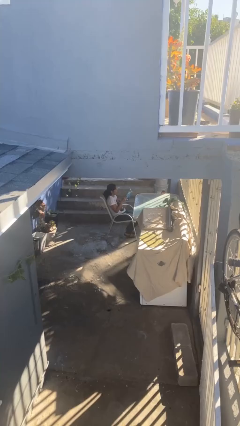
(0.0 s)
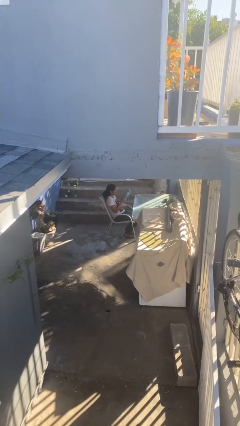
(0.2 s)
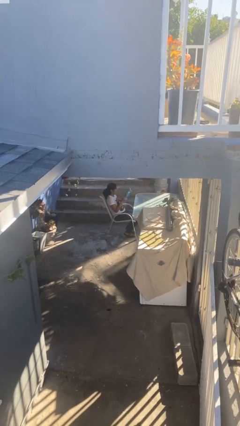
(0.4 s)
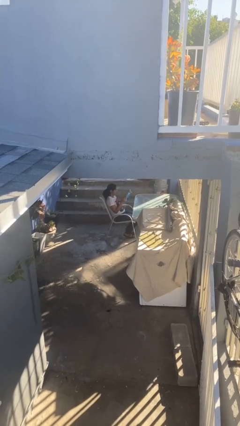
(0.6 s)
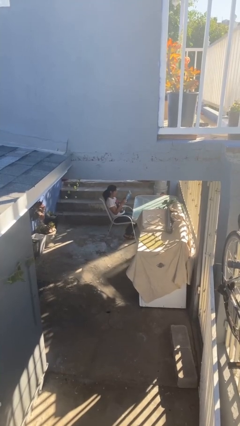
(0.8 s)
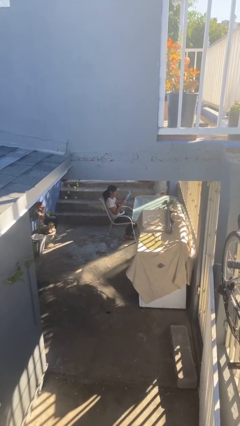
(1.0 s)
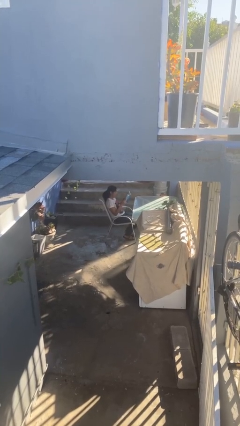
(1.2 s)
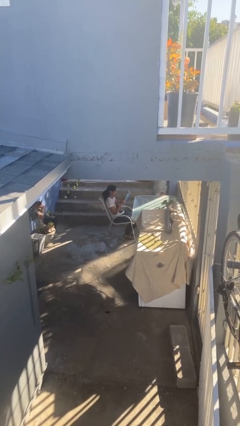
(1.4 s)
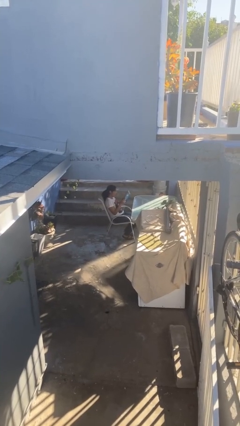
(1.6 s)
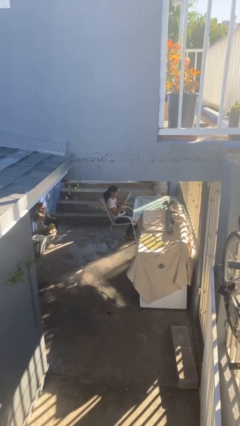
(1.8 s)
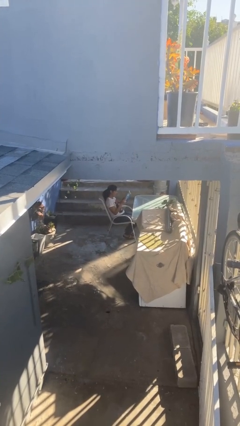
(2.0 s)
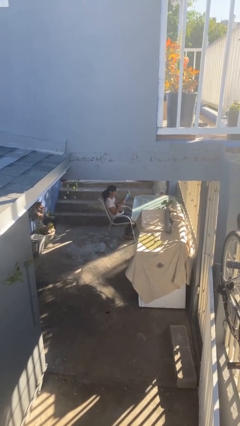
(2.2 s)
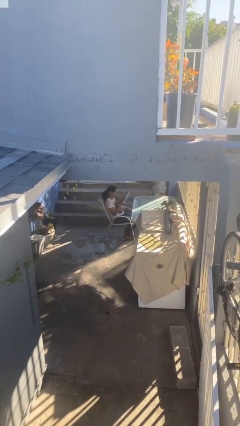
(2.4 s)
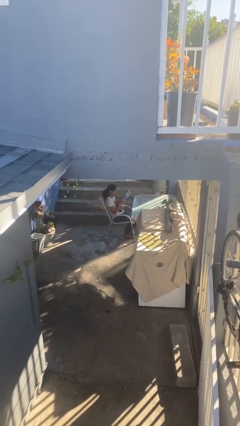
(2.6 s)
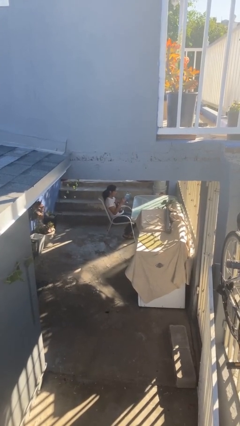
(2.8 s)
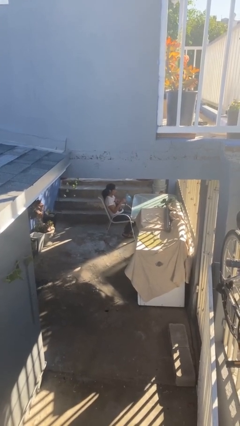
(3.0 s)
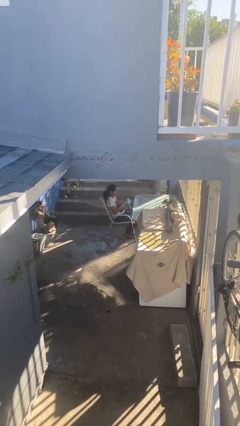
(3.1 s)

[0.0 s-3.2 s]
person reads document

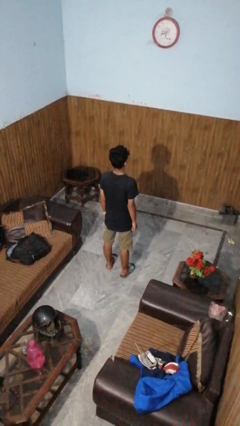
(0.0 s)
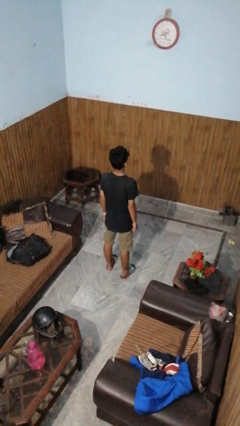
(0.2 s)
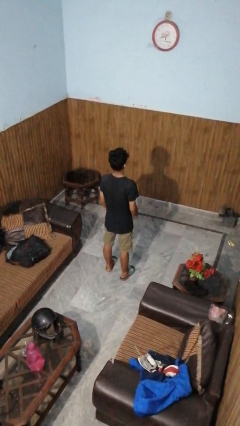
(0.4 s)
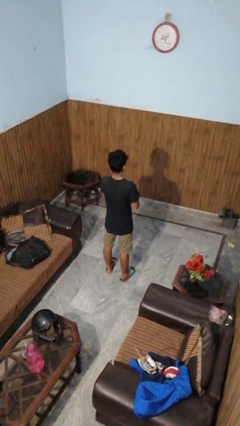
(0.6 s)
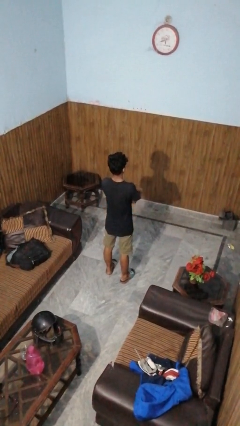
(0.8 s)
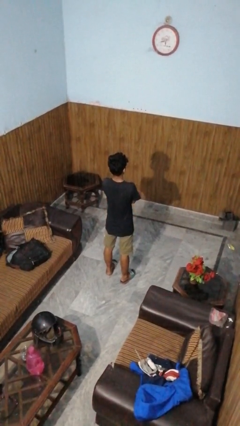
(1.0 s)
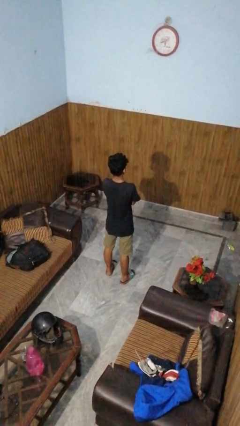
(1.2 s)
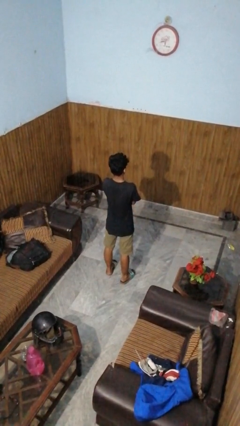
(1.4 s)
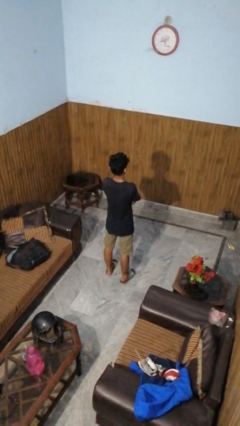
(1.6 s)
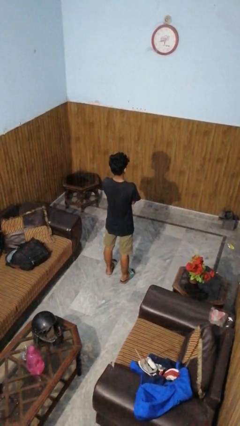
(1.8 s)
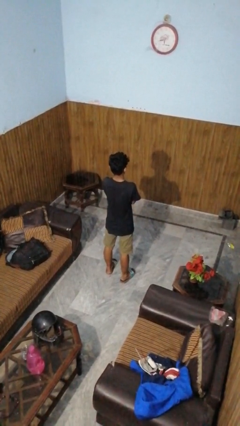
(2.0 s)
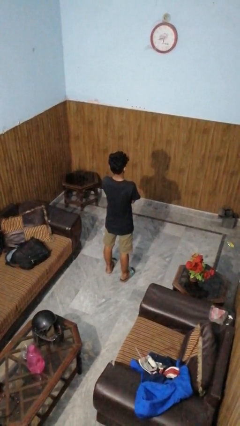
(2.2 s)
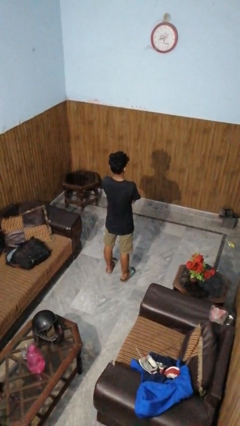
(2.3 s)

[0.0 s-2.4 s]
person crosses arms

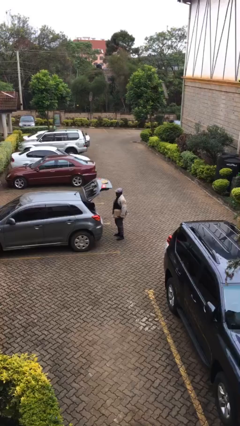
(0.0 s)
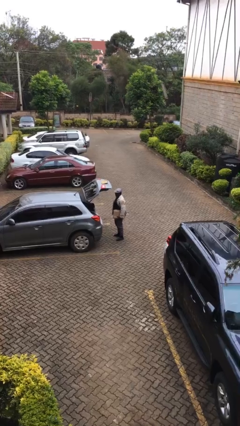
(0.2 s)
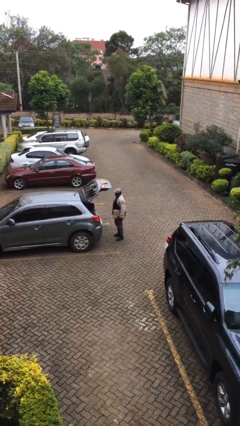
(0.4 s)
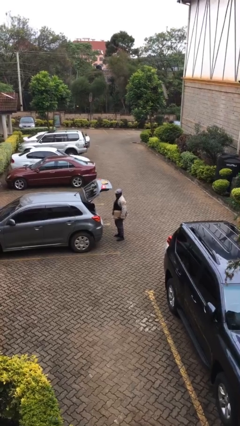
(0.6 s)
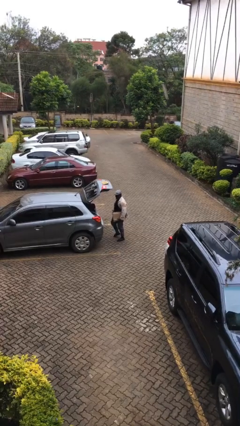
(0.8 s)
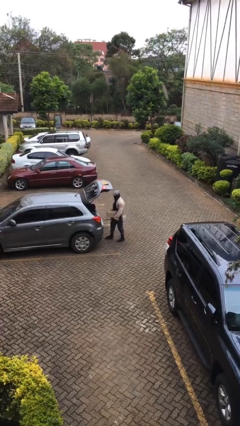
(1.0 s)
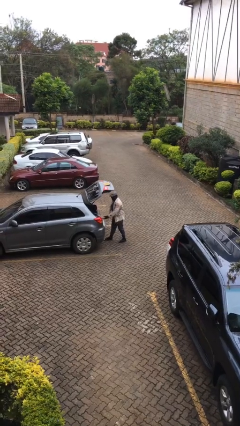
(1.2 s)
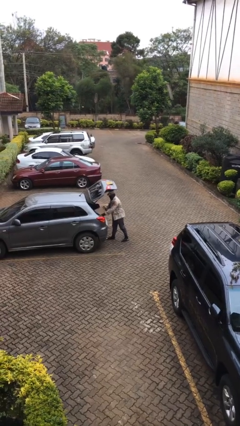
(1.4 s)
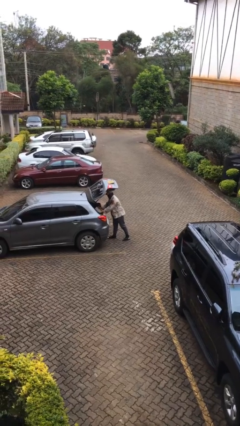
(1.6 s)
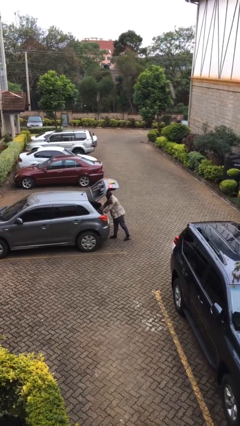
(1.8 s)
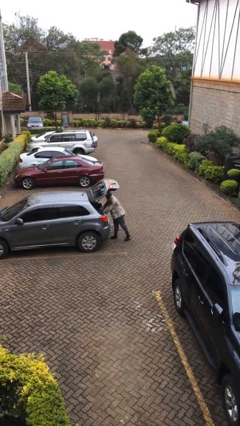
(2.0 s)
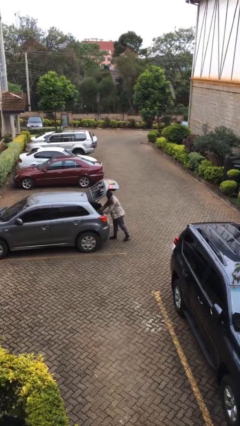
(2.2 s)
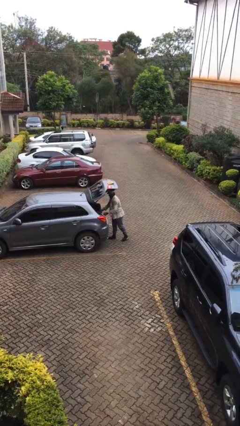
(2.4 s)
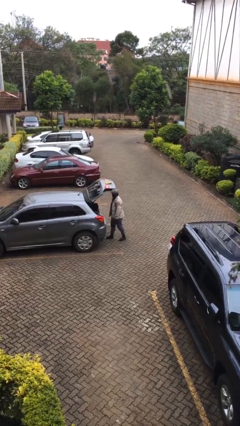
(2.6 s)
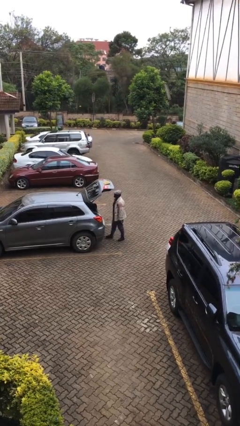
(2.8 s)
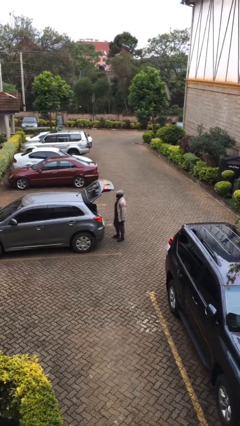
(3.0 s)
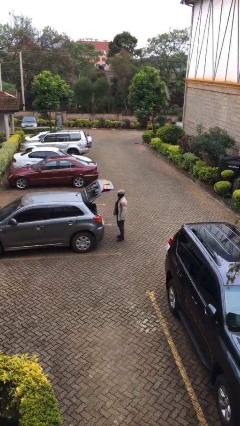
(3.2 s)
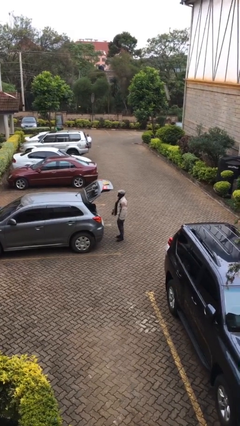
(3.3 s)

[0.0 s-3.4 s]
person loads car

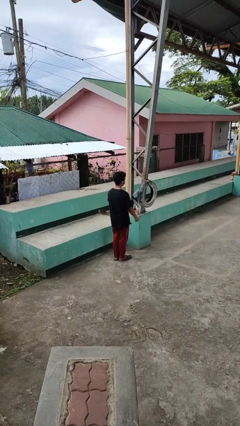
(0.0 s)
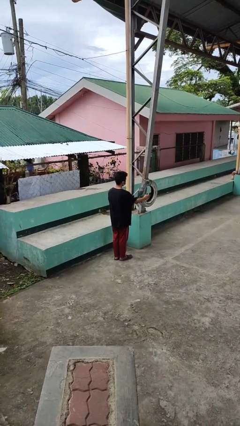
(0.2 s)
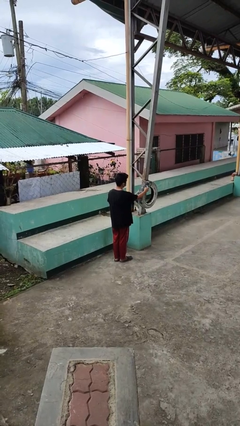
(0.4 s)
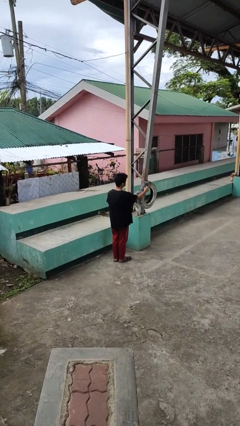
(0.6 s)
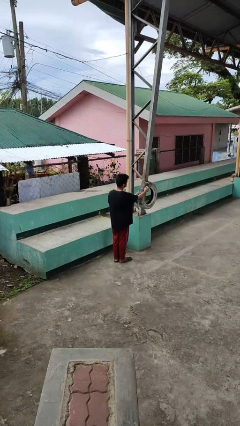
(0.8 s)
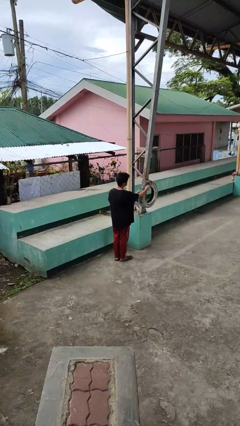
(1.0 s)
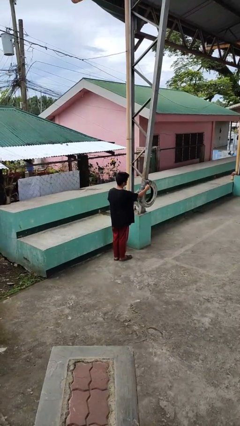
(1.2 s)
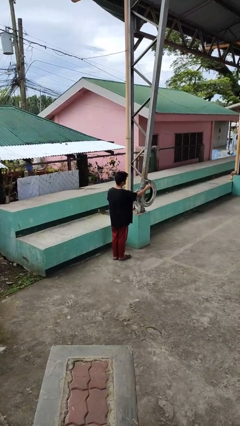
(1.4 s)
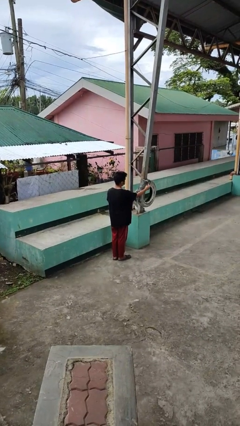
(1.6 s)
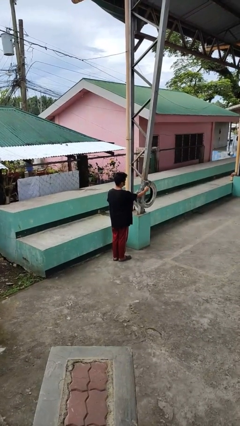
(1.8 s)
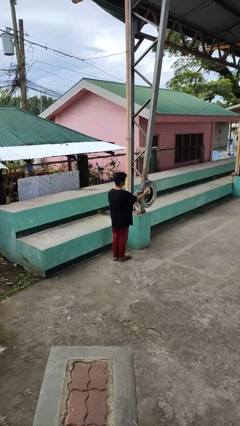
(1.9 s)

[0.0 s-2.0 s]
person taps object with finger

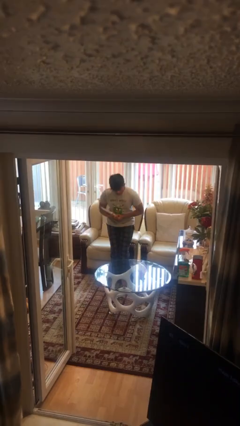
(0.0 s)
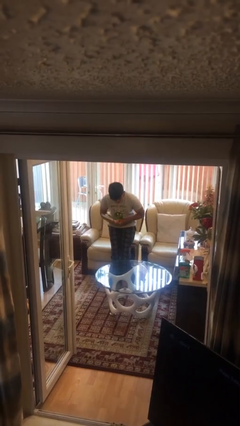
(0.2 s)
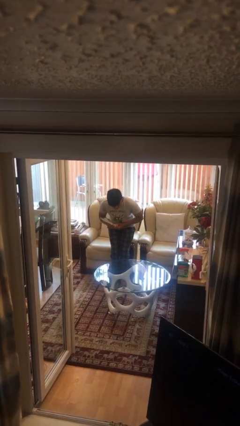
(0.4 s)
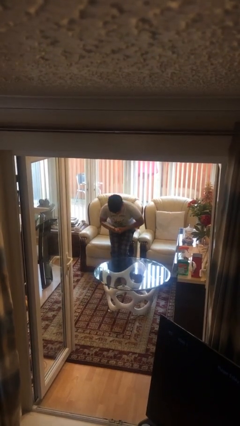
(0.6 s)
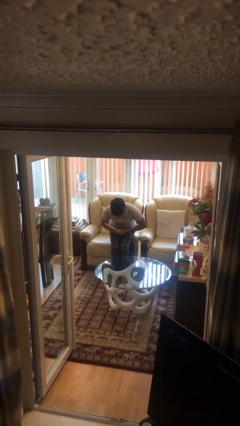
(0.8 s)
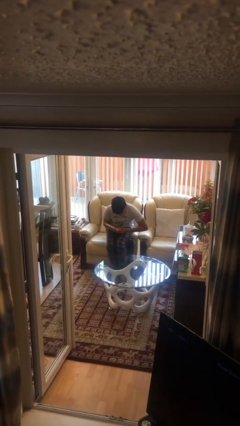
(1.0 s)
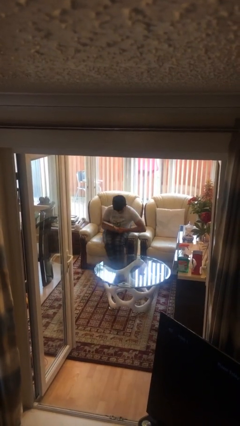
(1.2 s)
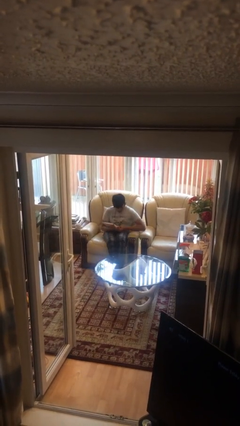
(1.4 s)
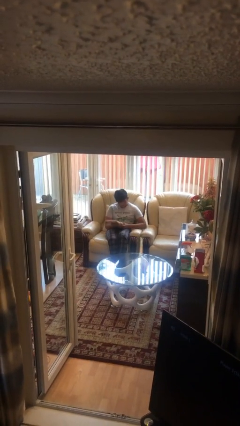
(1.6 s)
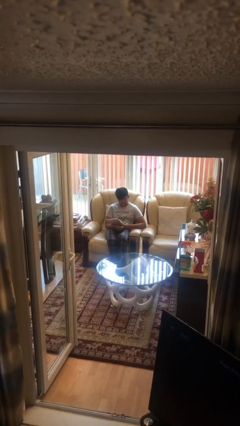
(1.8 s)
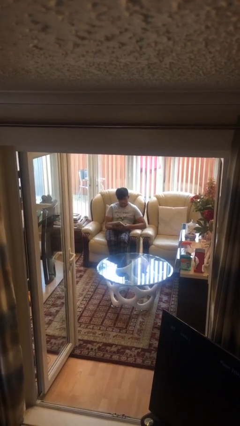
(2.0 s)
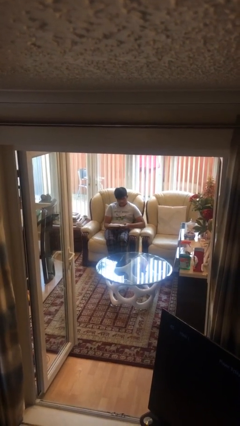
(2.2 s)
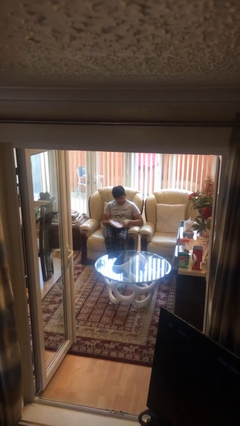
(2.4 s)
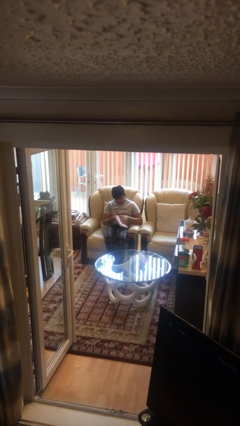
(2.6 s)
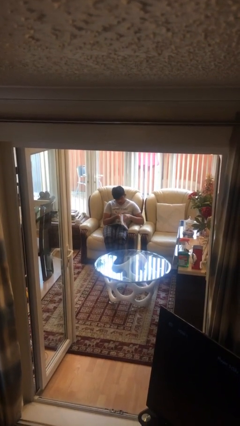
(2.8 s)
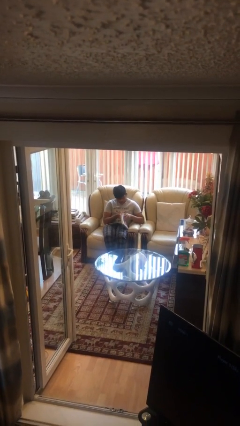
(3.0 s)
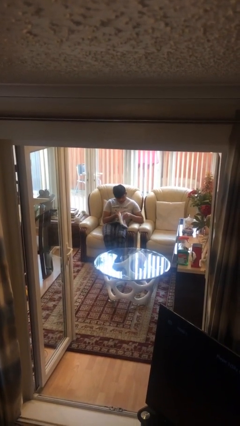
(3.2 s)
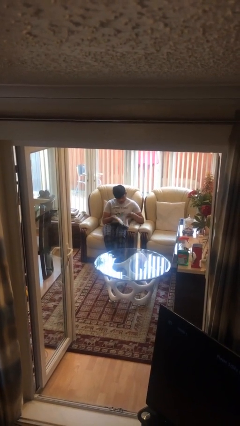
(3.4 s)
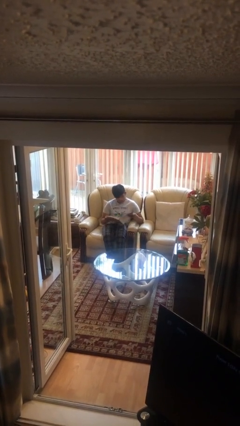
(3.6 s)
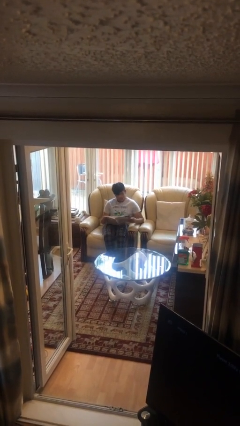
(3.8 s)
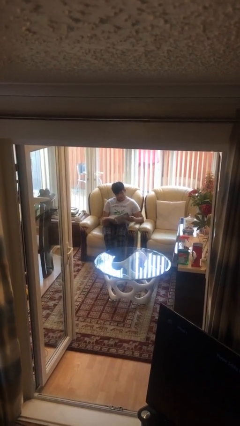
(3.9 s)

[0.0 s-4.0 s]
person sits down

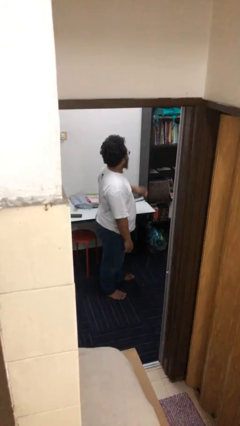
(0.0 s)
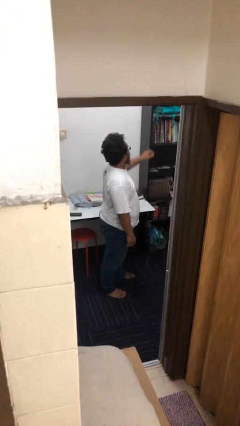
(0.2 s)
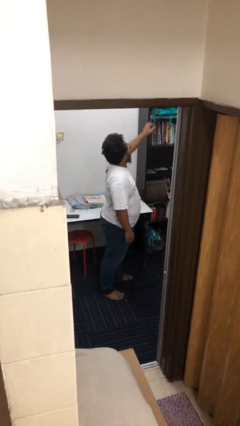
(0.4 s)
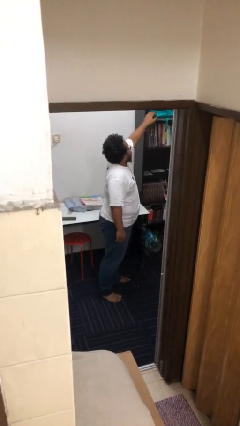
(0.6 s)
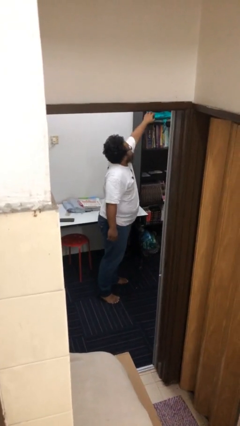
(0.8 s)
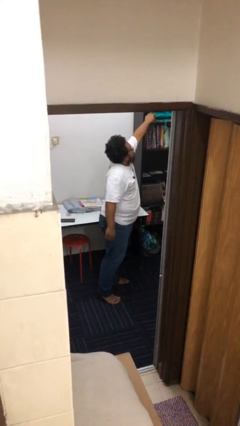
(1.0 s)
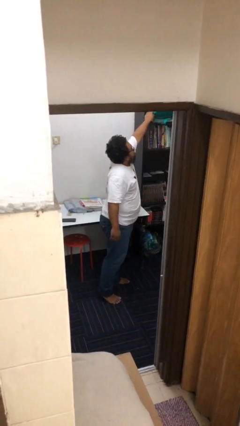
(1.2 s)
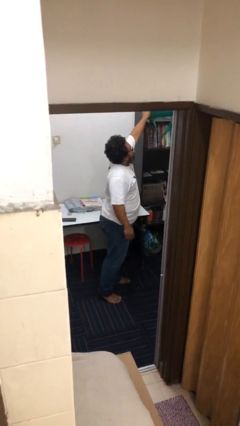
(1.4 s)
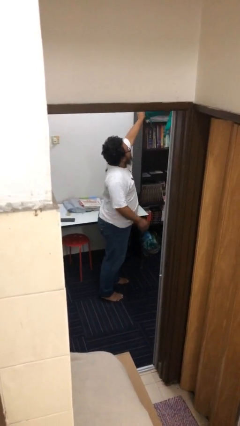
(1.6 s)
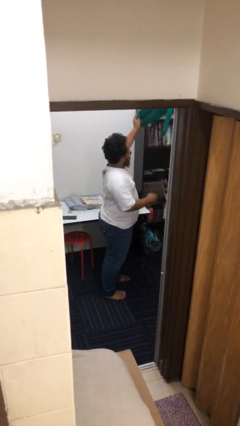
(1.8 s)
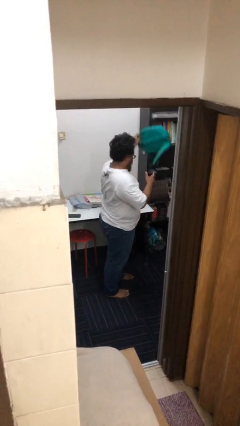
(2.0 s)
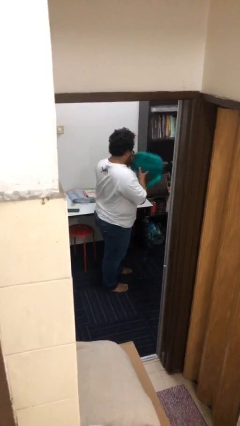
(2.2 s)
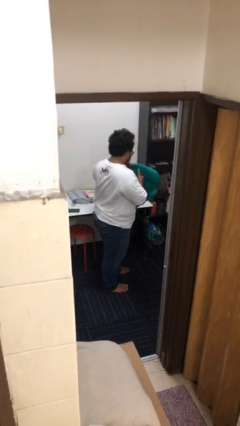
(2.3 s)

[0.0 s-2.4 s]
person picks up object from shelf
